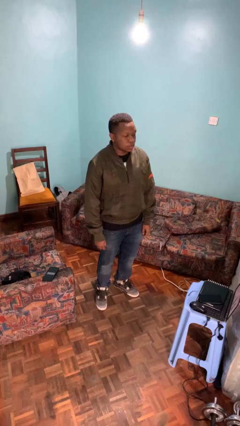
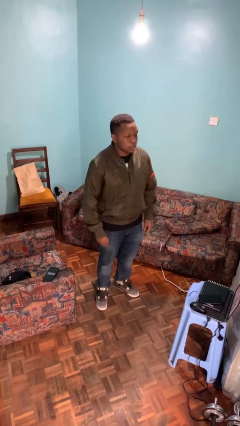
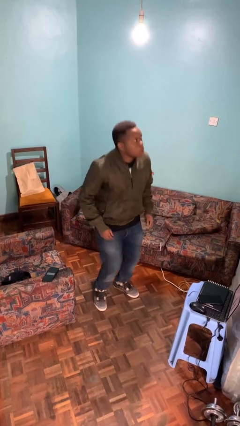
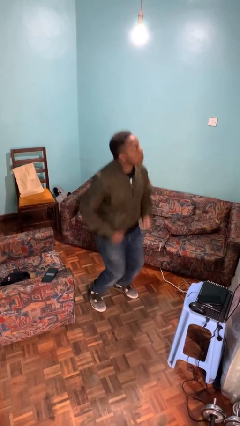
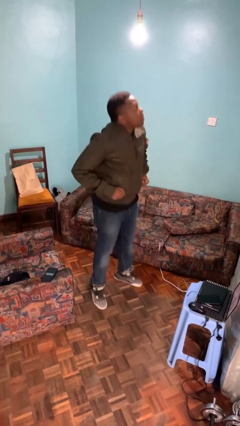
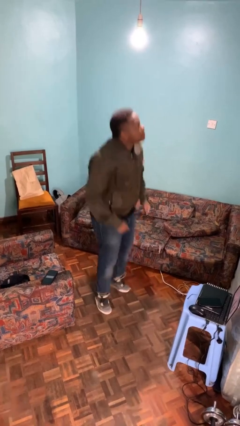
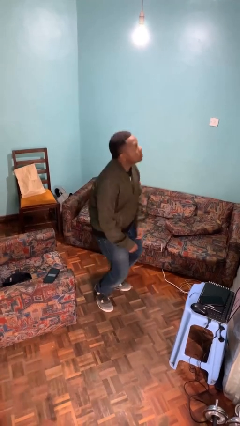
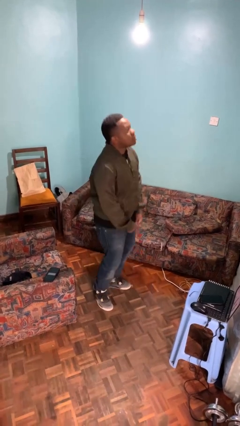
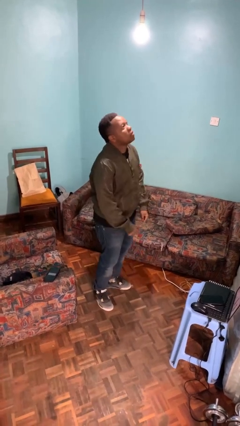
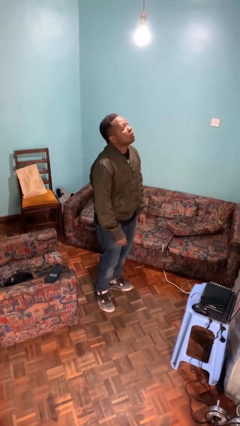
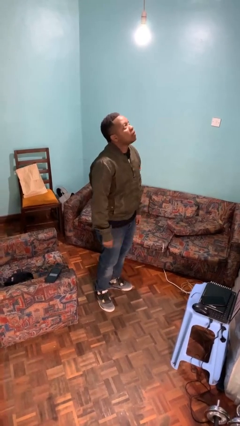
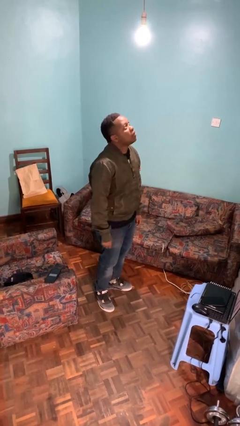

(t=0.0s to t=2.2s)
person jumps

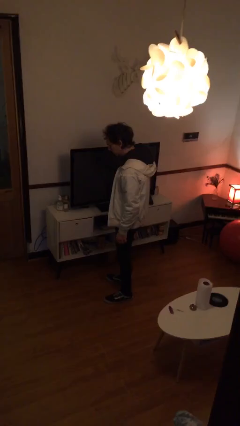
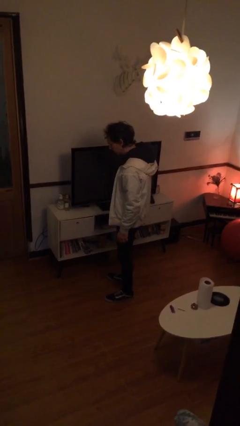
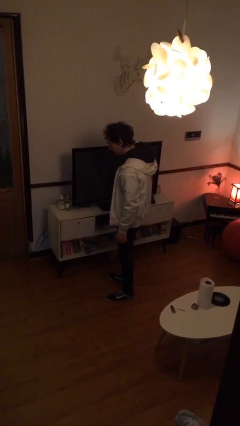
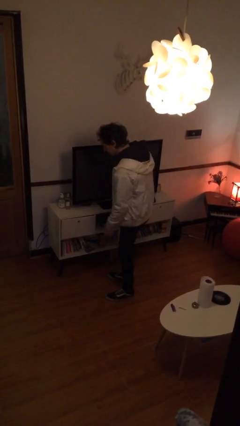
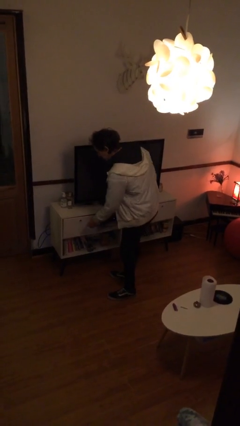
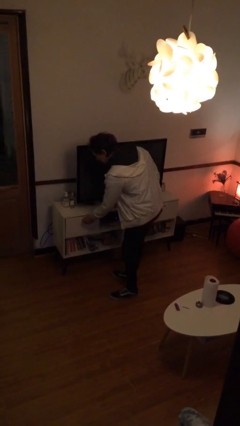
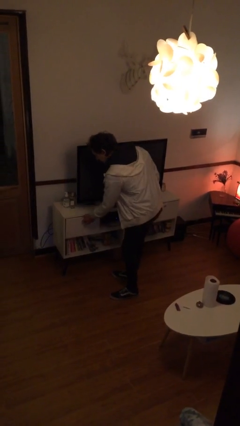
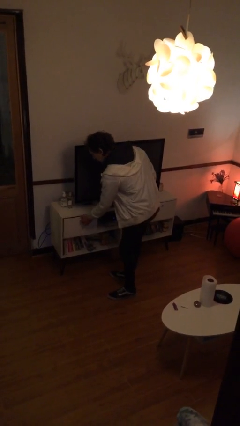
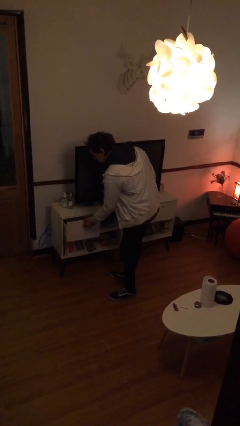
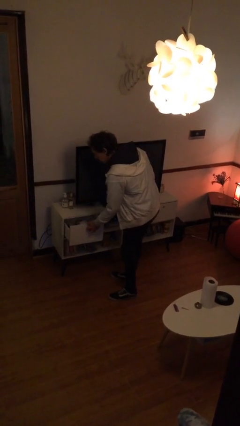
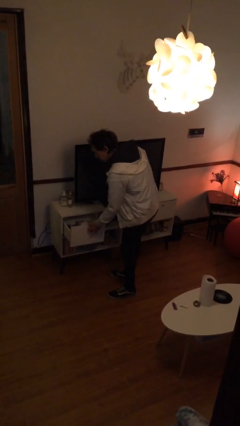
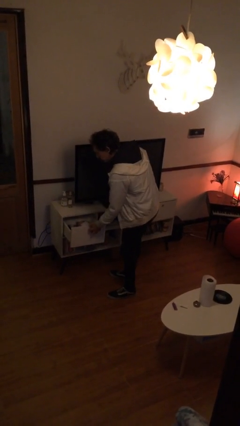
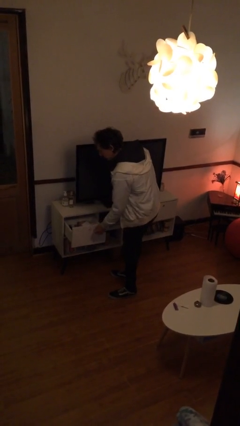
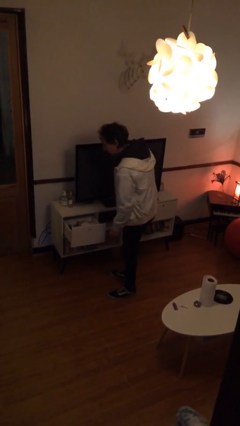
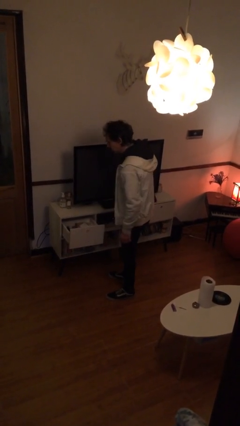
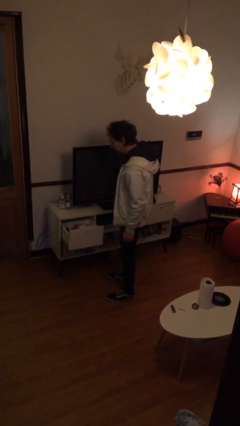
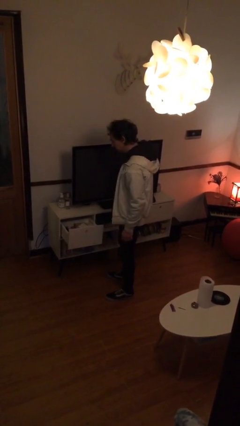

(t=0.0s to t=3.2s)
person opens dresser drawer

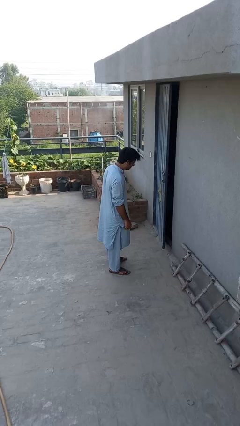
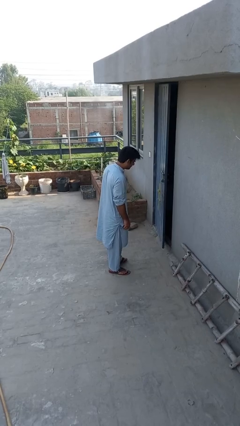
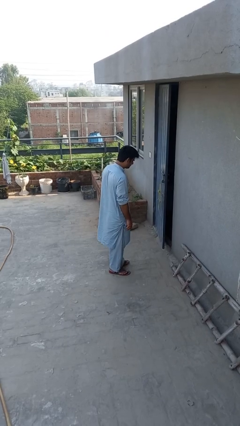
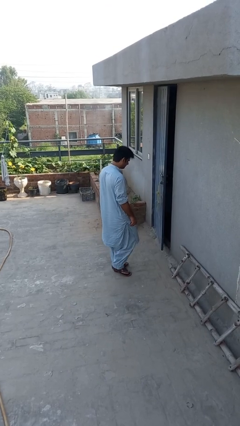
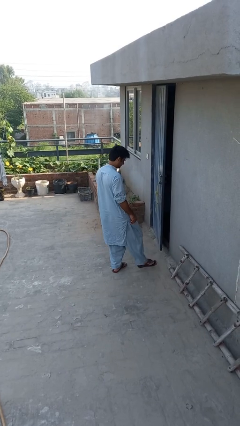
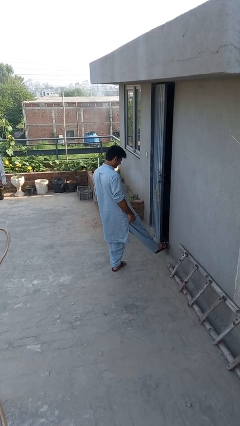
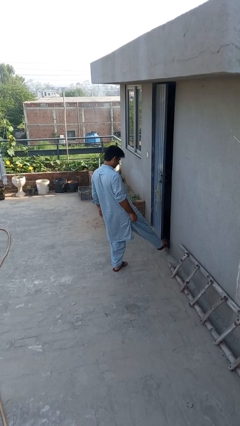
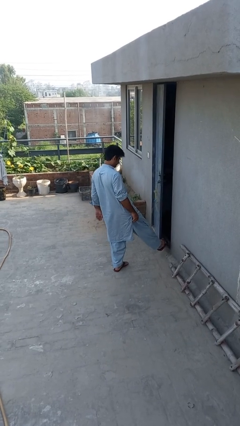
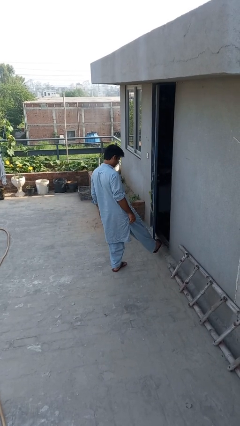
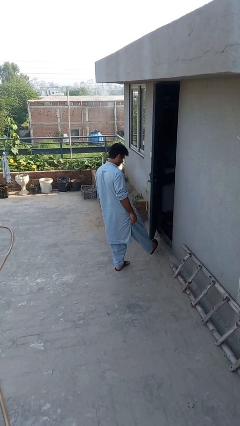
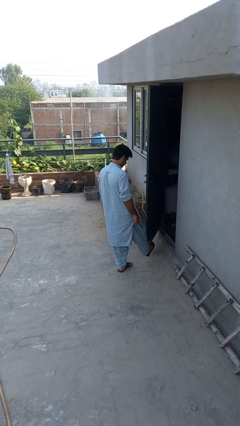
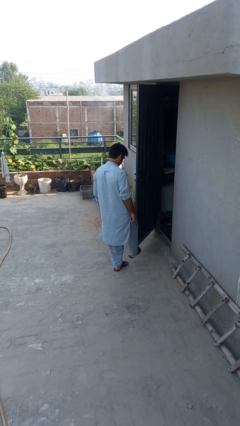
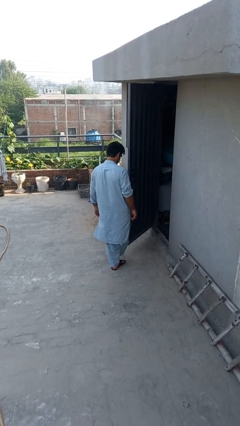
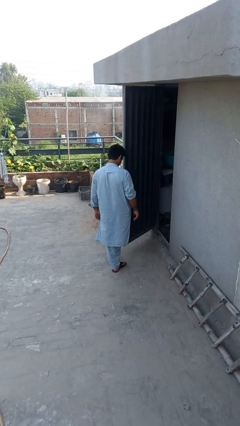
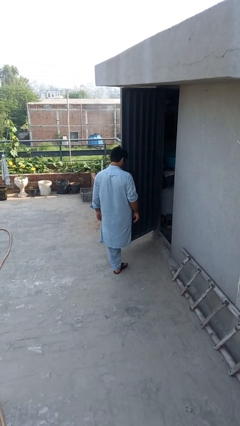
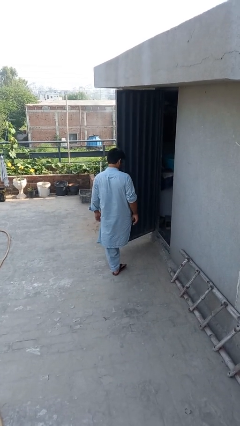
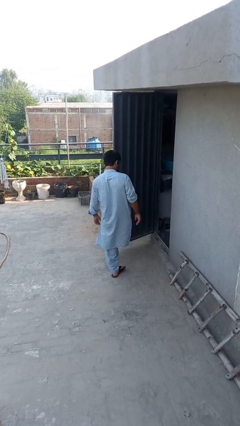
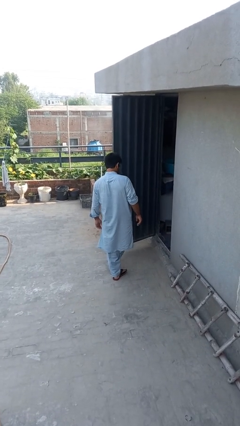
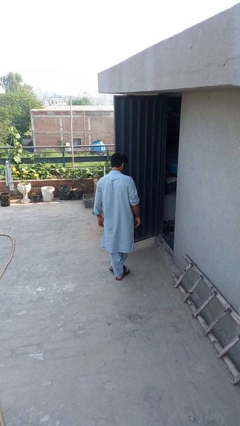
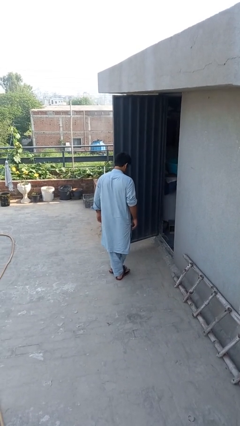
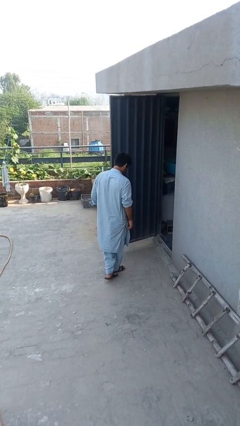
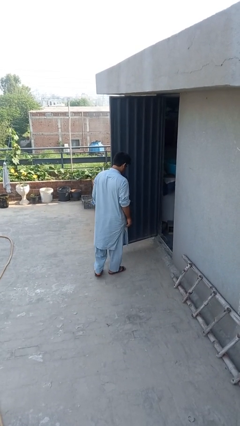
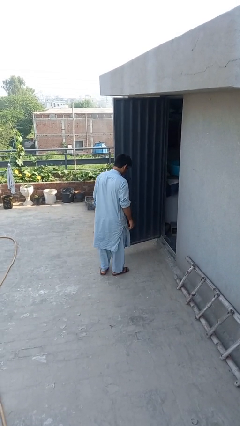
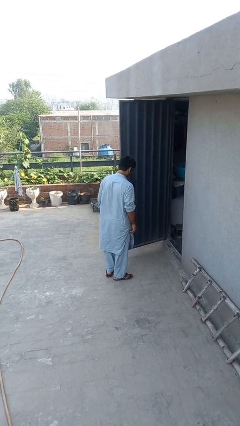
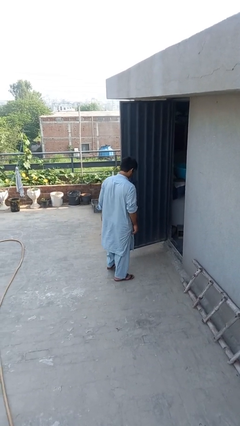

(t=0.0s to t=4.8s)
person opens facility door

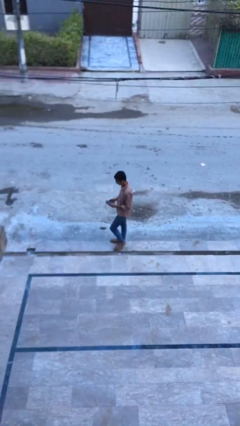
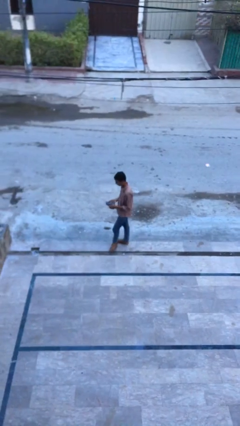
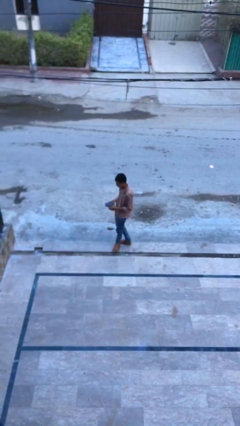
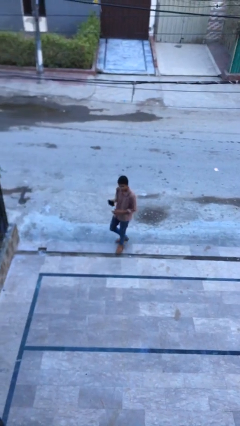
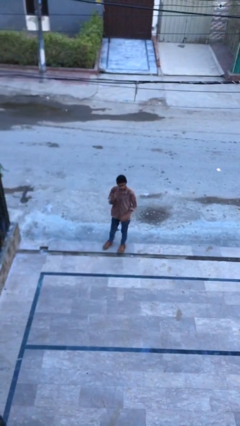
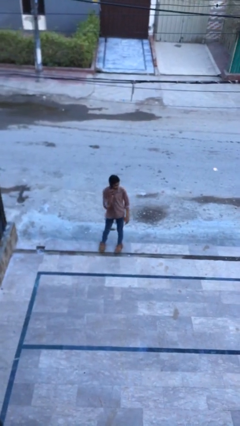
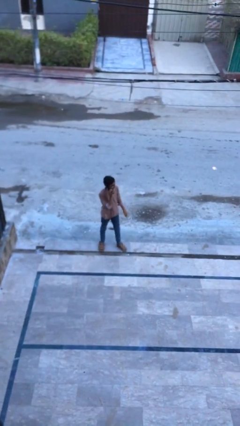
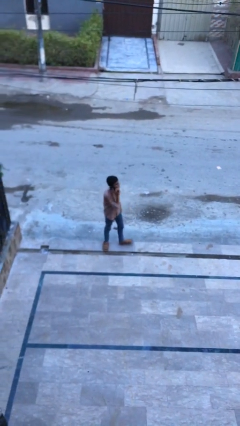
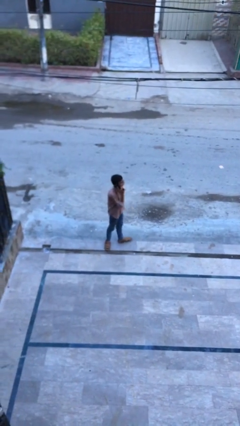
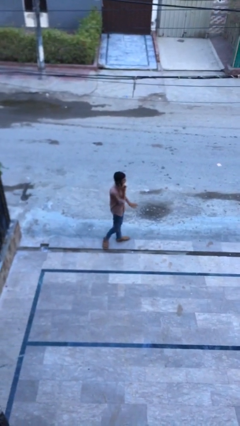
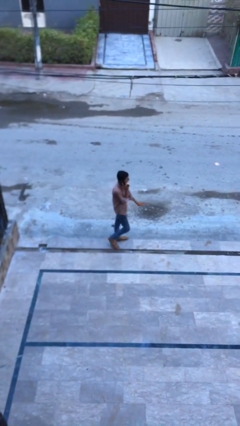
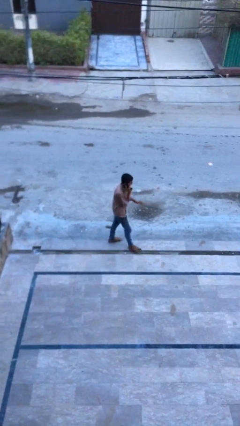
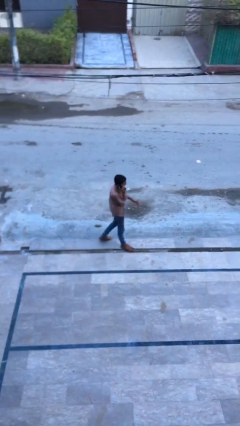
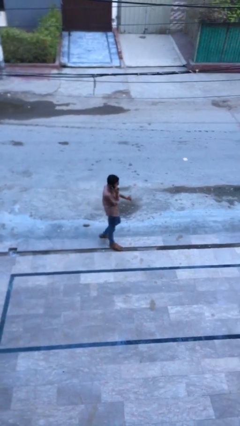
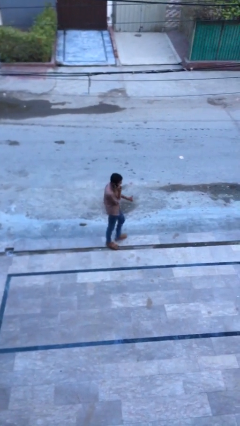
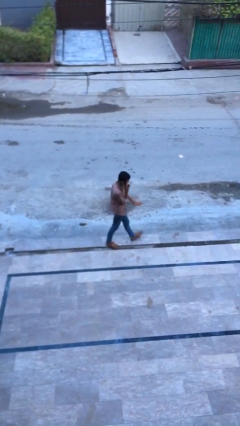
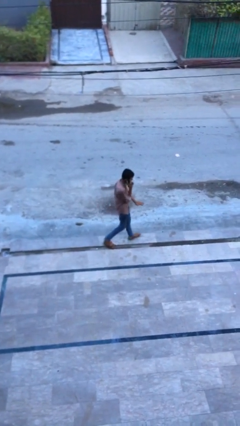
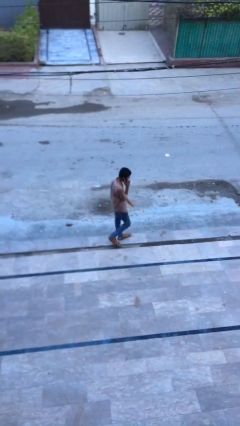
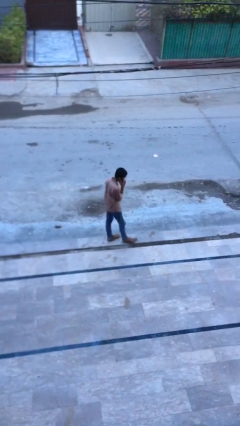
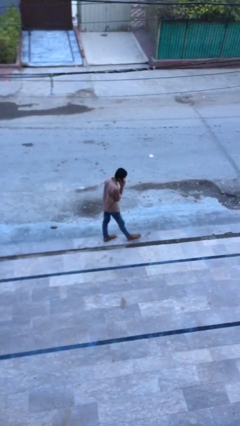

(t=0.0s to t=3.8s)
person talks on phone

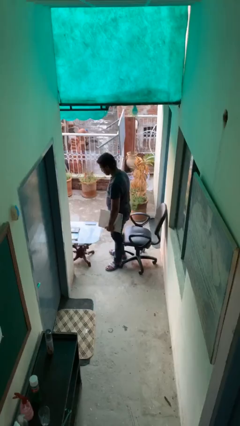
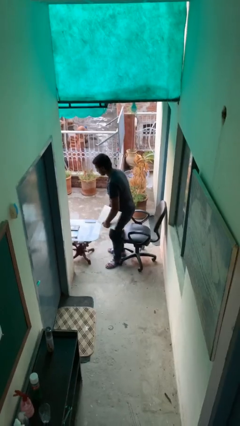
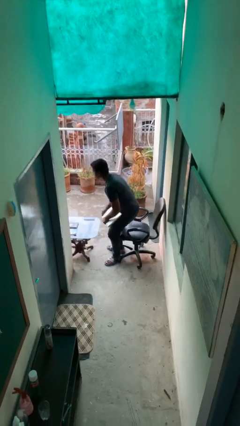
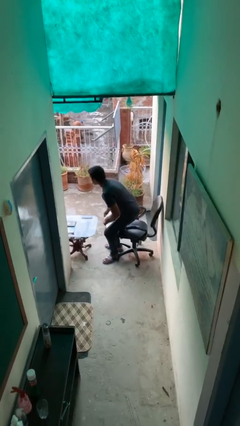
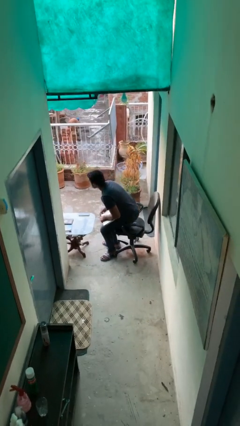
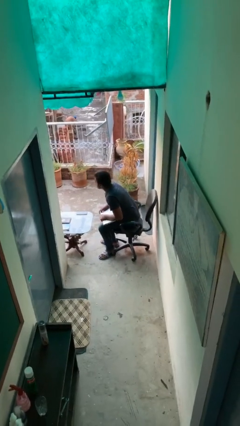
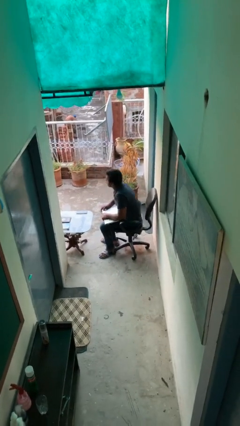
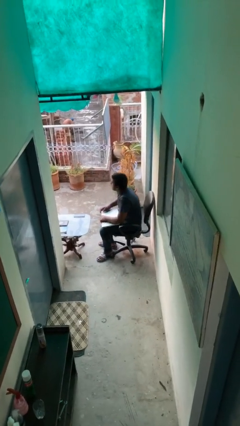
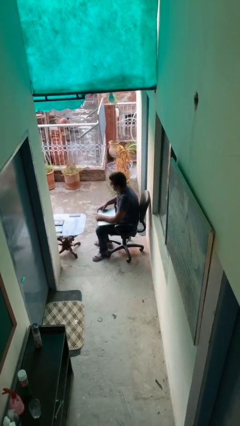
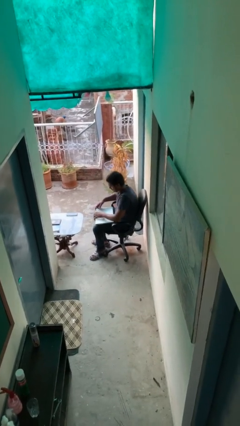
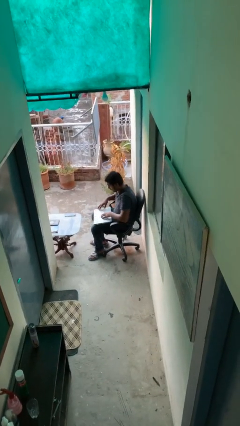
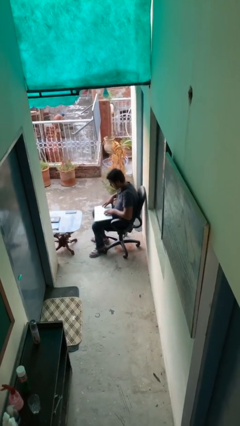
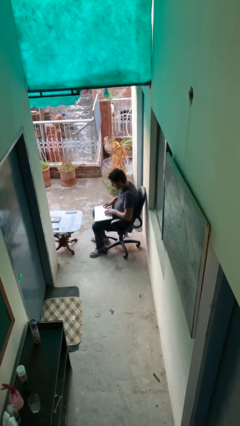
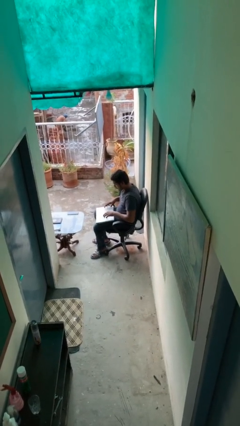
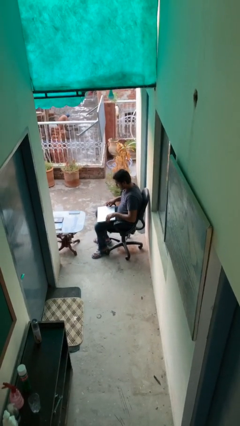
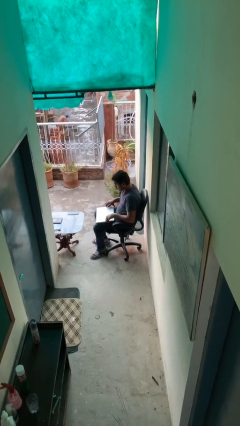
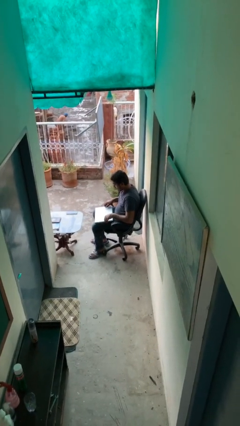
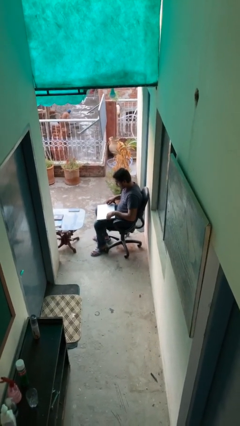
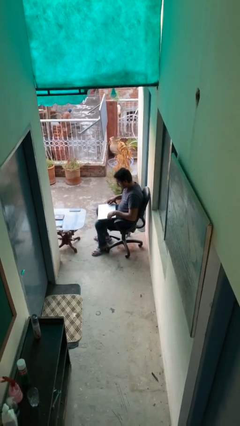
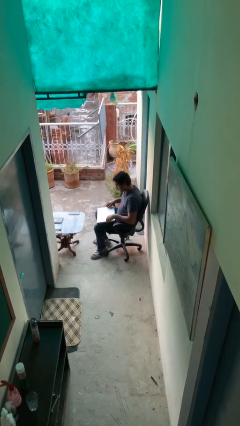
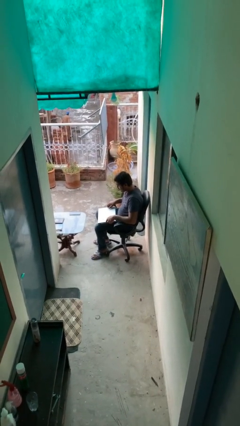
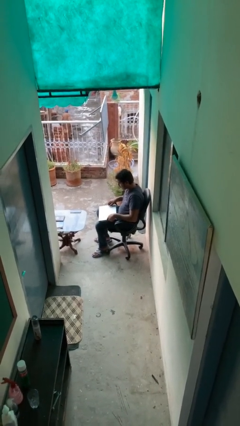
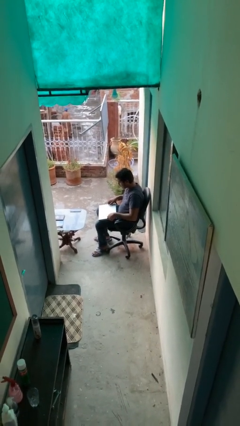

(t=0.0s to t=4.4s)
person sits down
